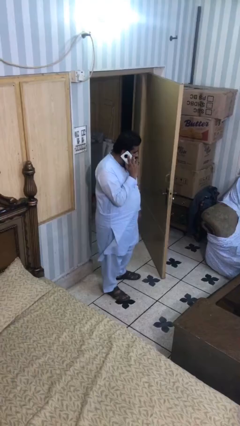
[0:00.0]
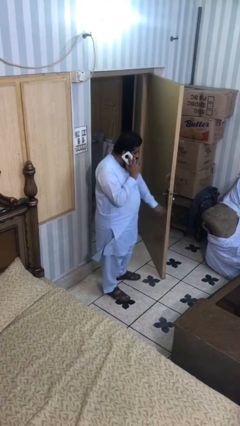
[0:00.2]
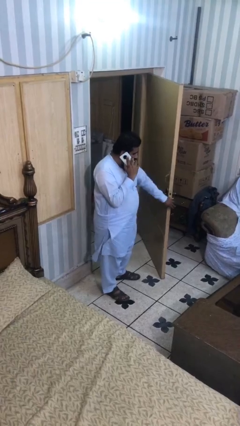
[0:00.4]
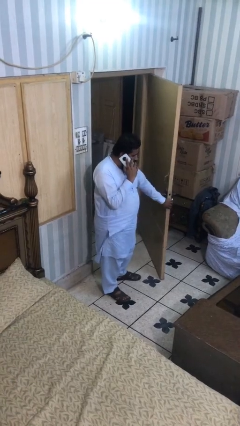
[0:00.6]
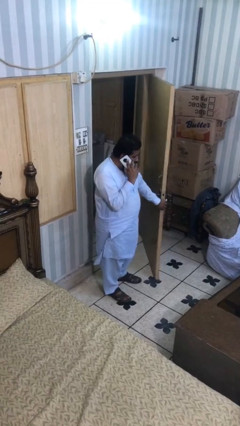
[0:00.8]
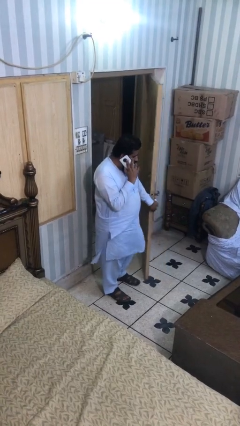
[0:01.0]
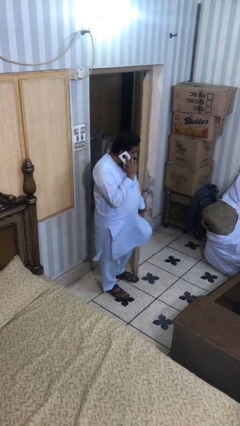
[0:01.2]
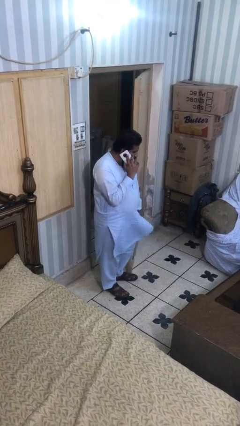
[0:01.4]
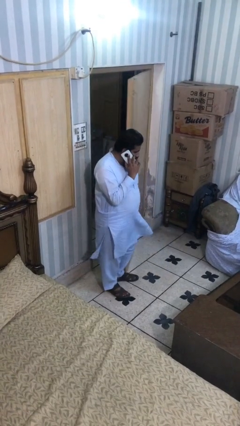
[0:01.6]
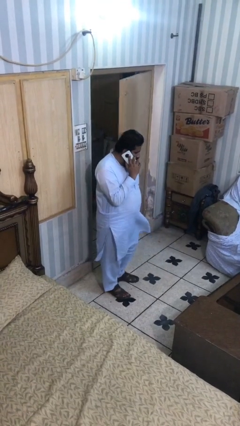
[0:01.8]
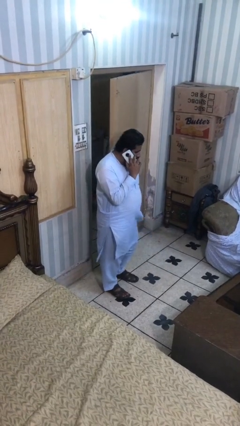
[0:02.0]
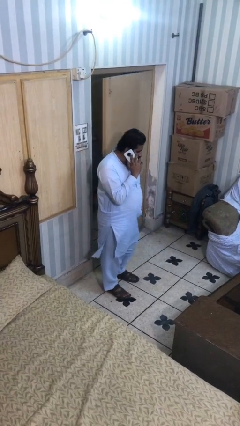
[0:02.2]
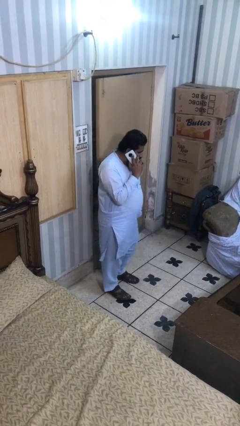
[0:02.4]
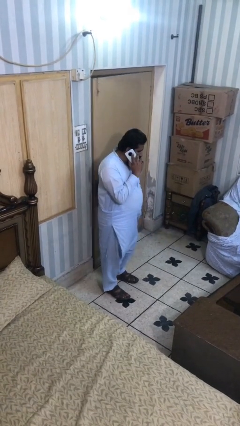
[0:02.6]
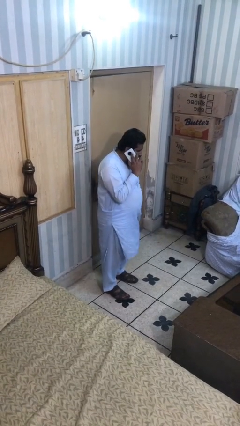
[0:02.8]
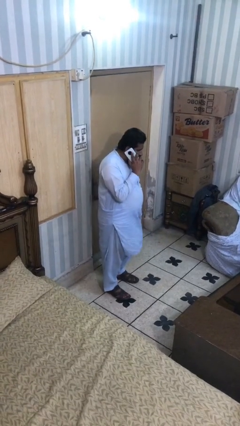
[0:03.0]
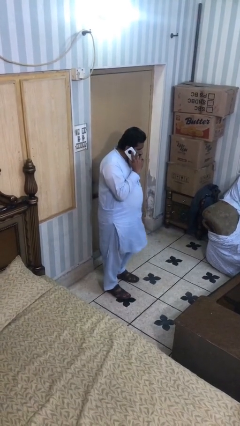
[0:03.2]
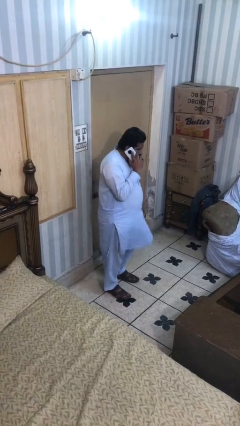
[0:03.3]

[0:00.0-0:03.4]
person closes facility door

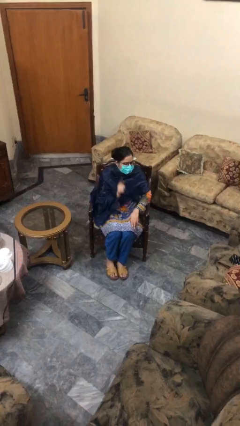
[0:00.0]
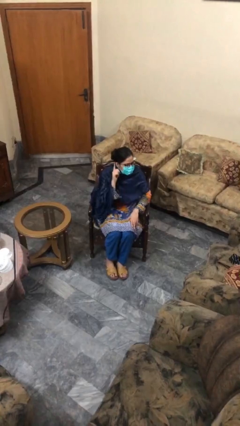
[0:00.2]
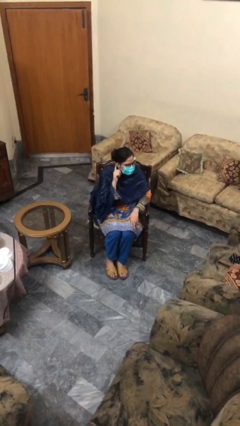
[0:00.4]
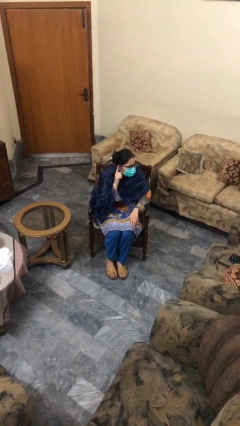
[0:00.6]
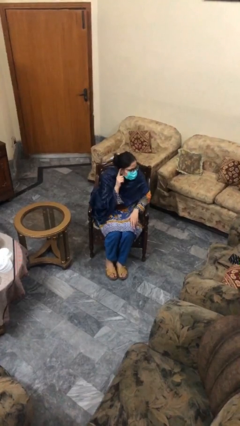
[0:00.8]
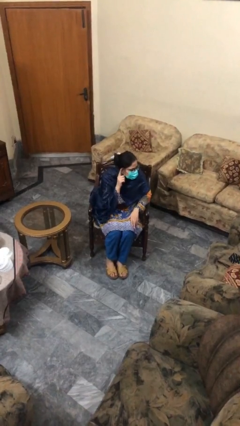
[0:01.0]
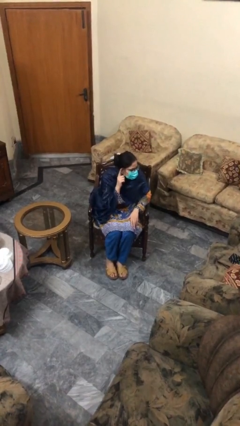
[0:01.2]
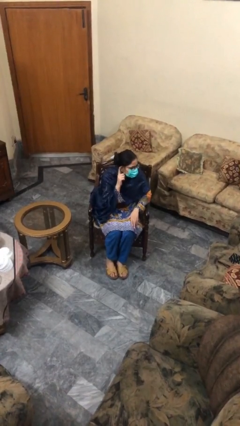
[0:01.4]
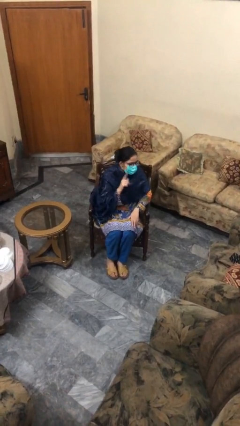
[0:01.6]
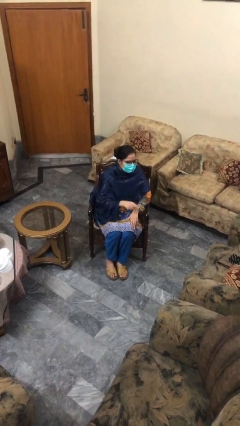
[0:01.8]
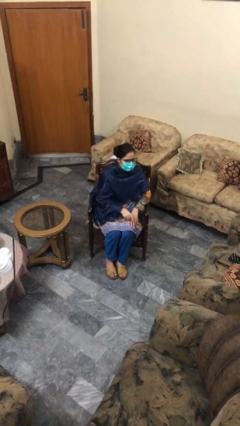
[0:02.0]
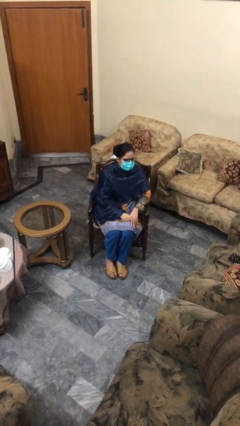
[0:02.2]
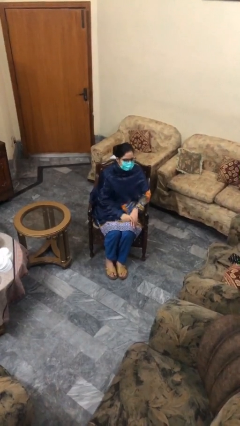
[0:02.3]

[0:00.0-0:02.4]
person gestures listen closely

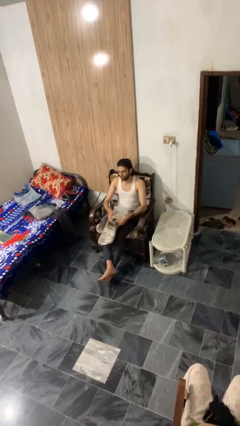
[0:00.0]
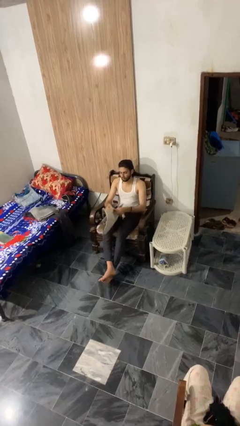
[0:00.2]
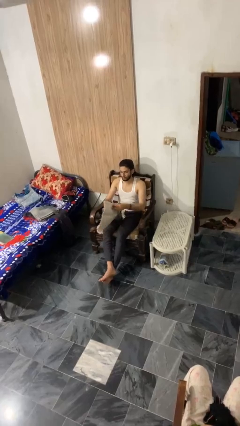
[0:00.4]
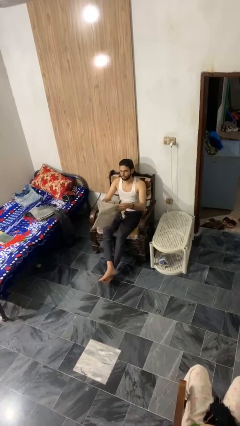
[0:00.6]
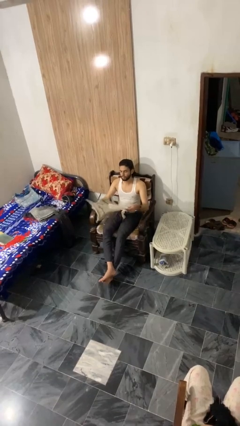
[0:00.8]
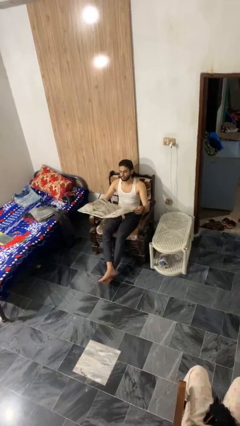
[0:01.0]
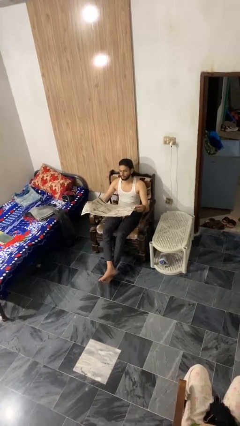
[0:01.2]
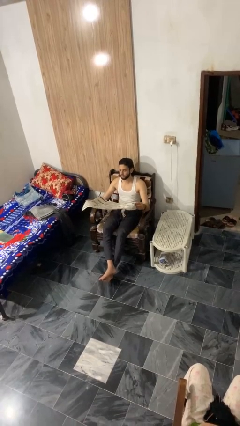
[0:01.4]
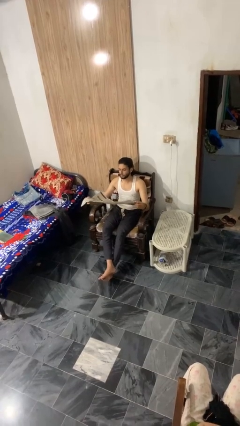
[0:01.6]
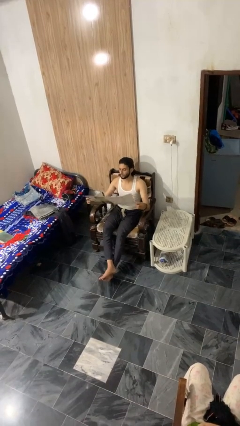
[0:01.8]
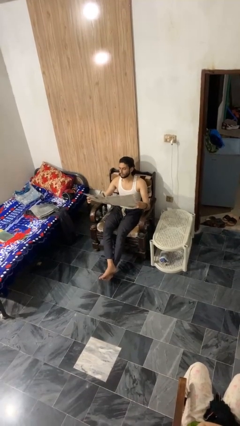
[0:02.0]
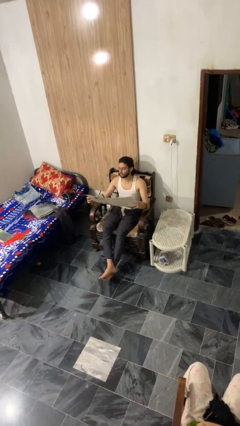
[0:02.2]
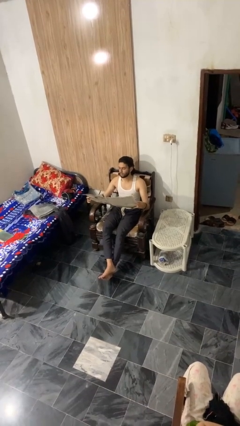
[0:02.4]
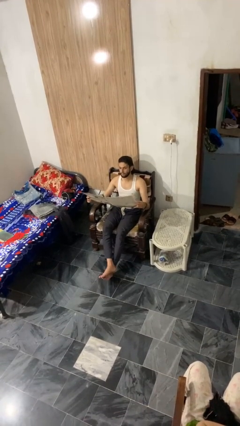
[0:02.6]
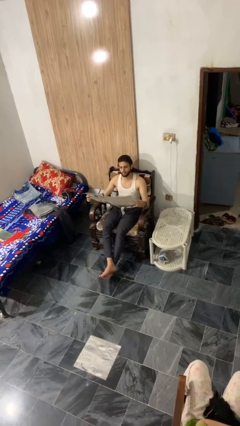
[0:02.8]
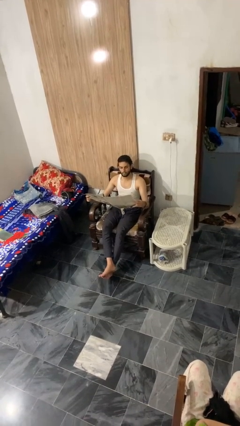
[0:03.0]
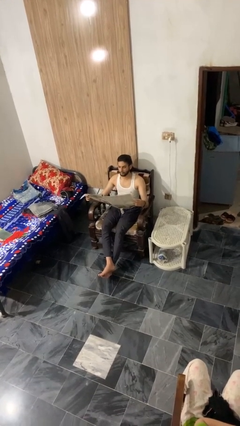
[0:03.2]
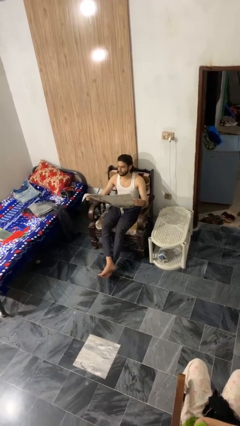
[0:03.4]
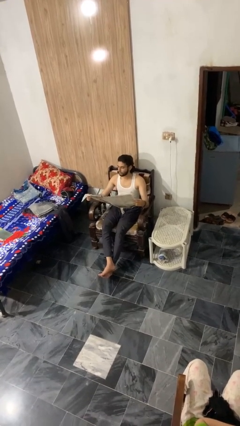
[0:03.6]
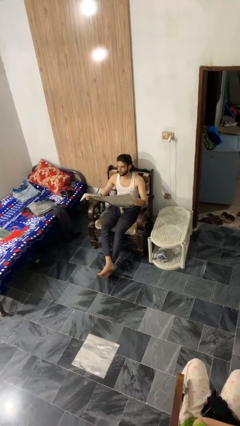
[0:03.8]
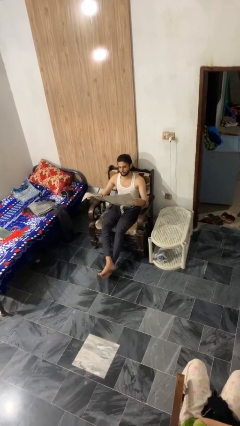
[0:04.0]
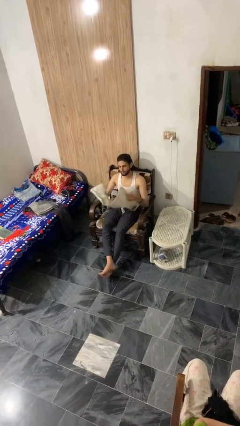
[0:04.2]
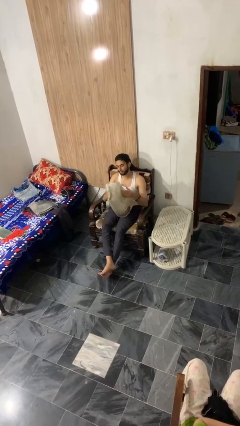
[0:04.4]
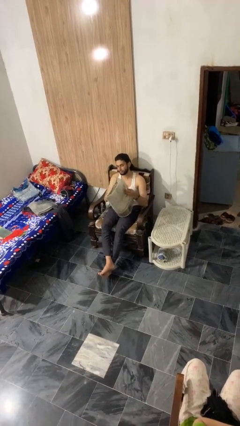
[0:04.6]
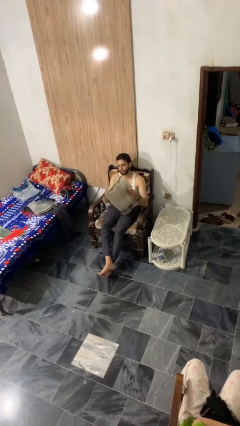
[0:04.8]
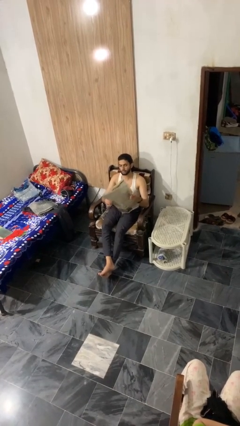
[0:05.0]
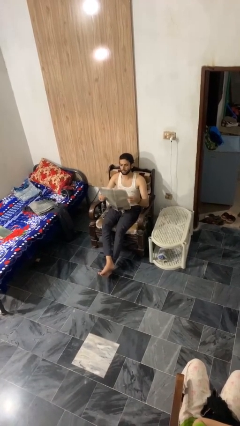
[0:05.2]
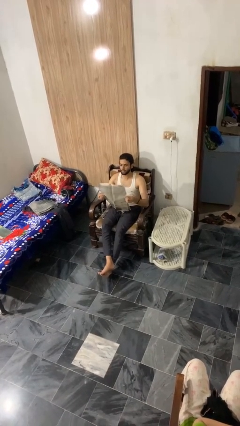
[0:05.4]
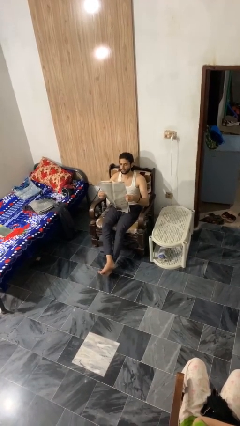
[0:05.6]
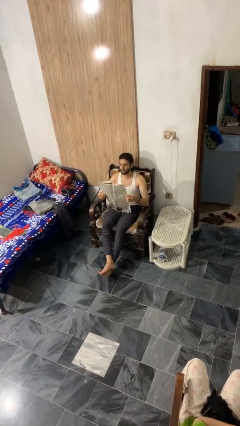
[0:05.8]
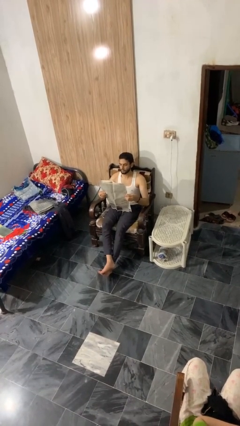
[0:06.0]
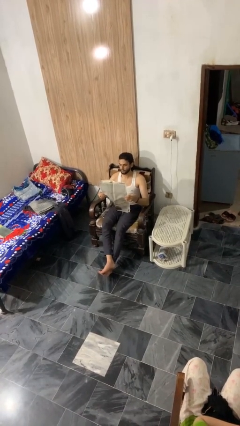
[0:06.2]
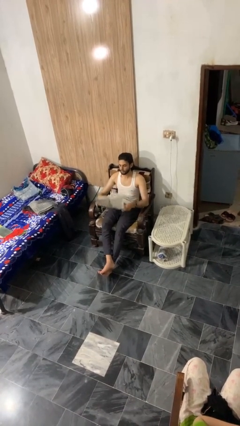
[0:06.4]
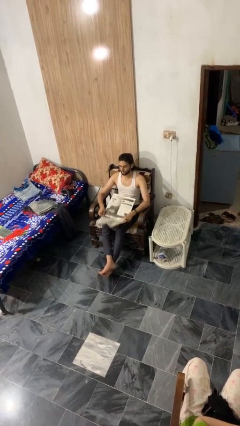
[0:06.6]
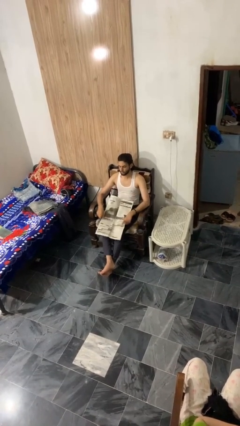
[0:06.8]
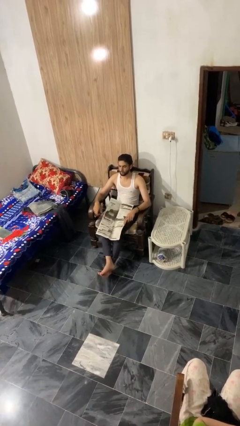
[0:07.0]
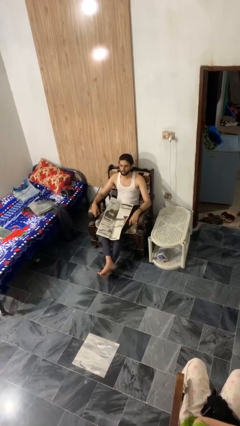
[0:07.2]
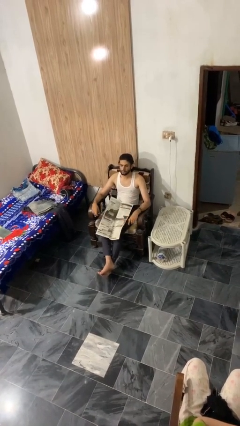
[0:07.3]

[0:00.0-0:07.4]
person reads newspaper

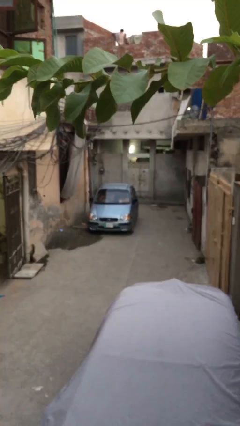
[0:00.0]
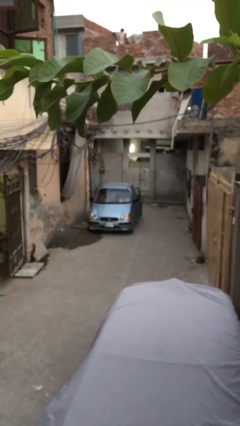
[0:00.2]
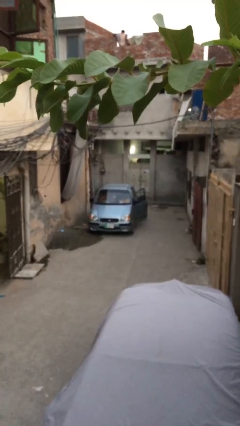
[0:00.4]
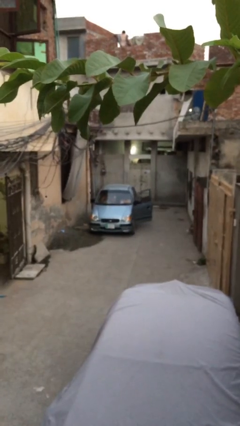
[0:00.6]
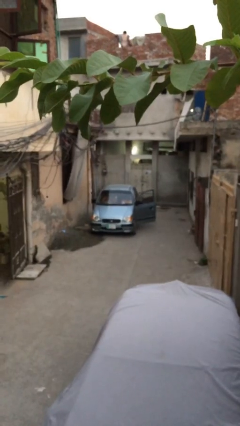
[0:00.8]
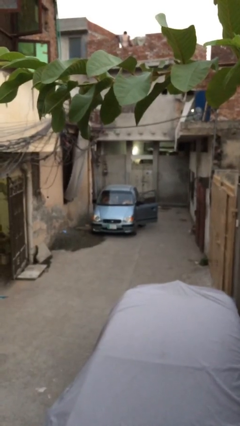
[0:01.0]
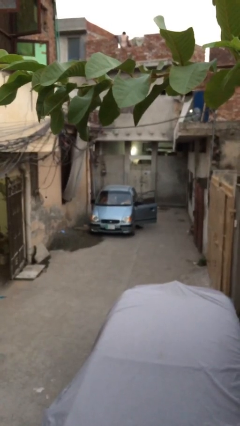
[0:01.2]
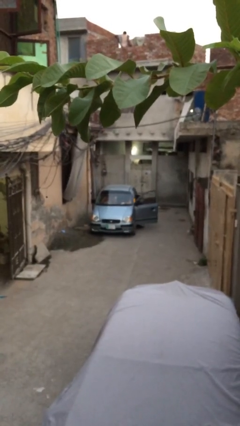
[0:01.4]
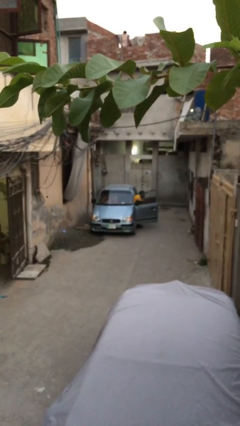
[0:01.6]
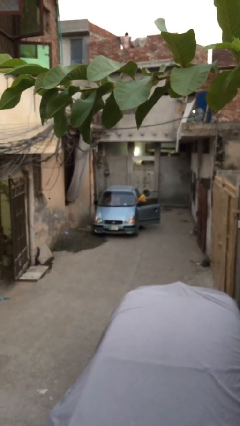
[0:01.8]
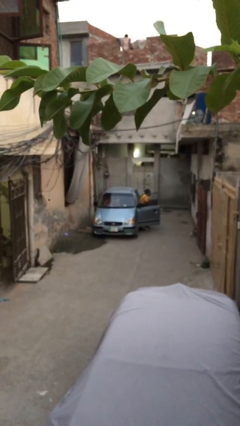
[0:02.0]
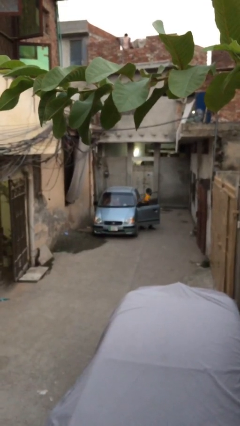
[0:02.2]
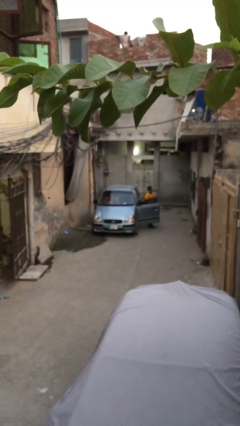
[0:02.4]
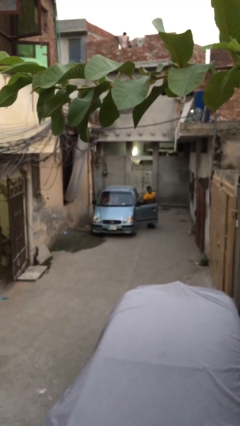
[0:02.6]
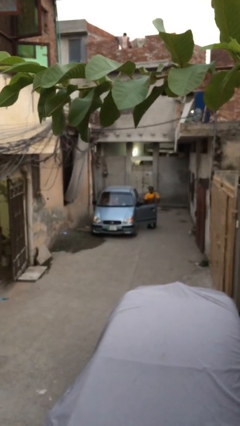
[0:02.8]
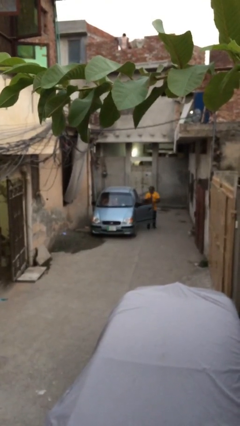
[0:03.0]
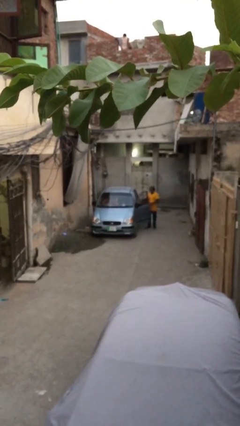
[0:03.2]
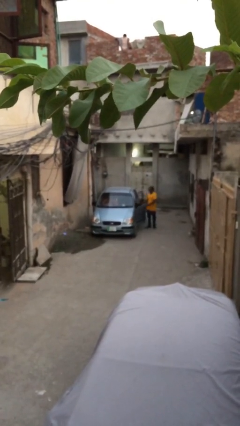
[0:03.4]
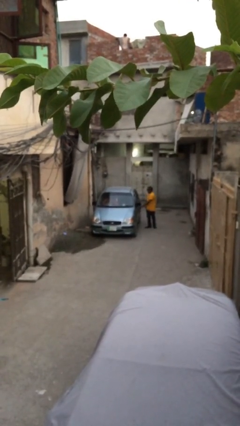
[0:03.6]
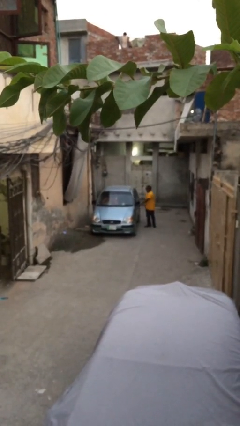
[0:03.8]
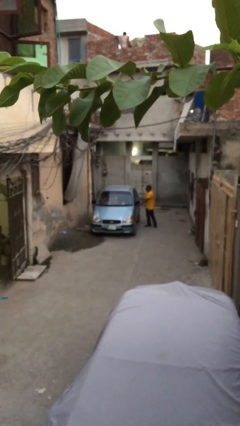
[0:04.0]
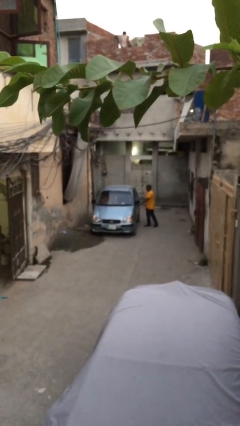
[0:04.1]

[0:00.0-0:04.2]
car drops off person

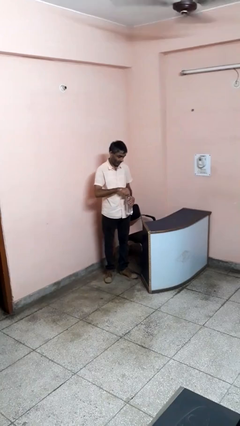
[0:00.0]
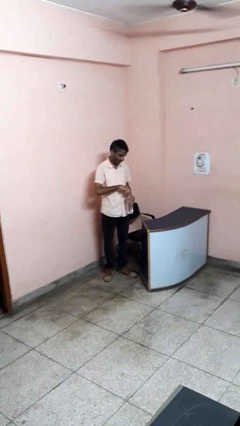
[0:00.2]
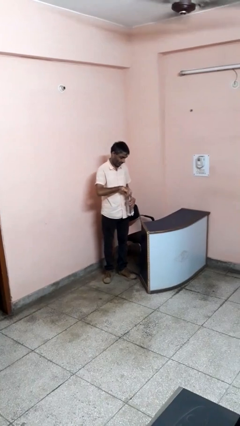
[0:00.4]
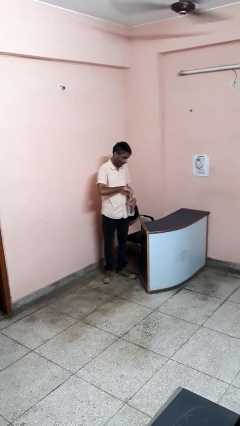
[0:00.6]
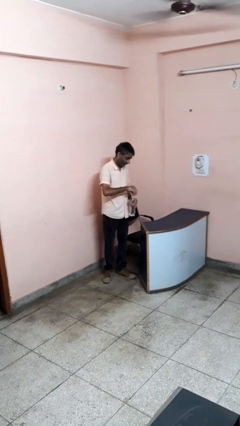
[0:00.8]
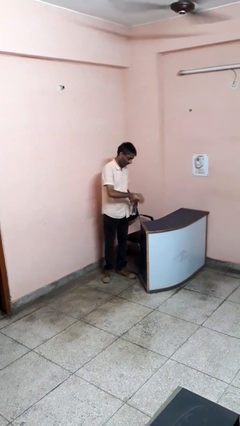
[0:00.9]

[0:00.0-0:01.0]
person unscrews lid from bottle
